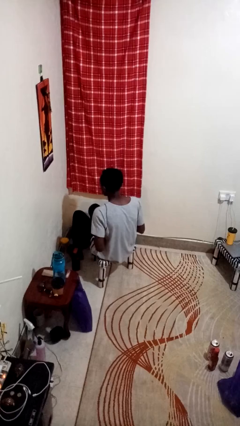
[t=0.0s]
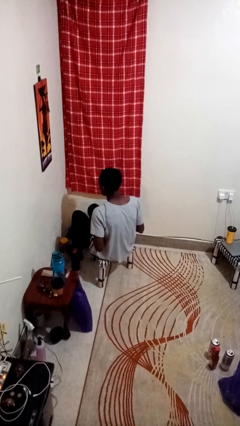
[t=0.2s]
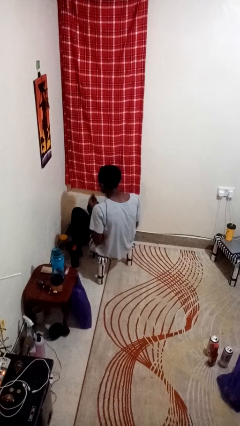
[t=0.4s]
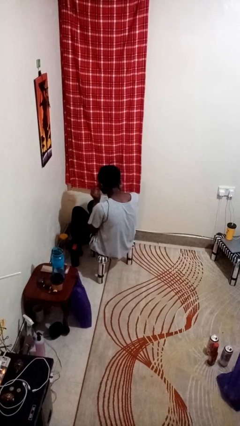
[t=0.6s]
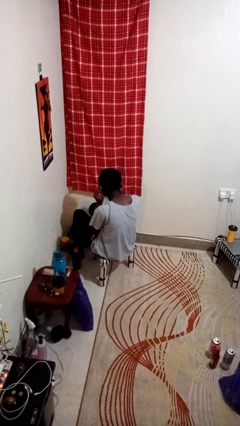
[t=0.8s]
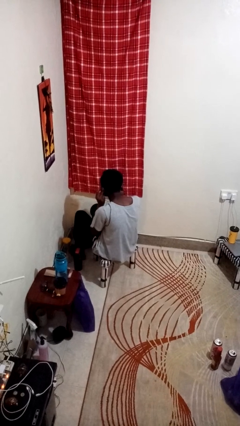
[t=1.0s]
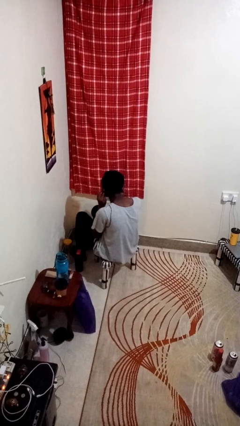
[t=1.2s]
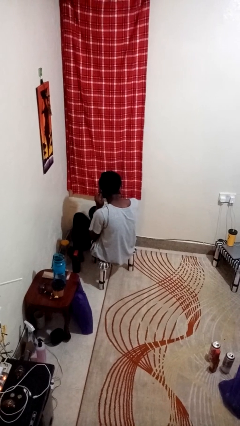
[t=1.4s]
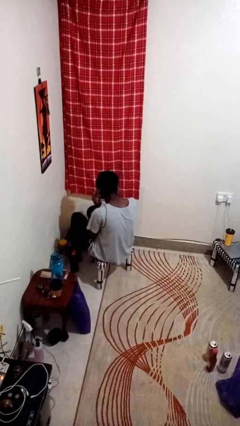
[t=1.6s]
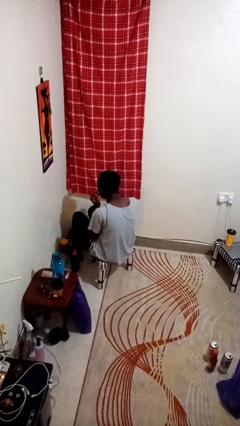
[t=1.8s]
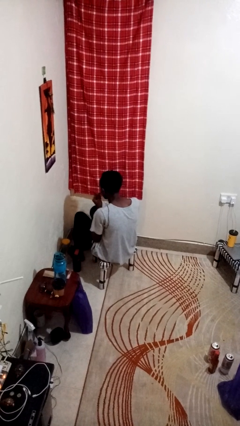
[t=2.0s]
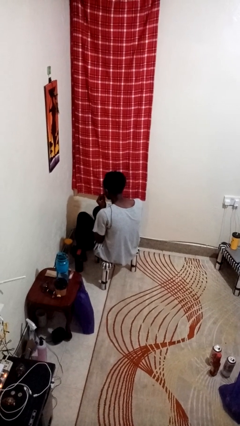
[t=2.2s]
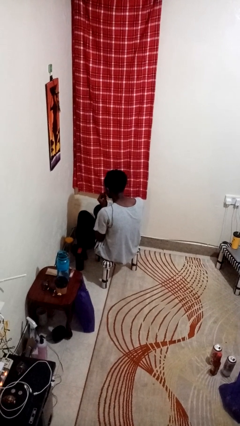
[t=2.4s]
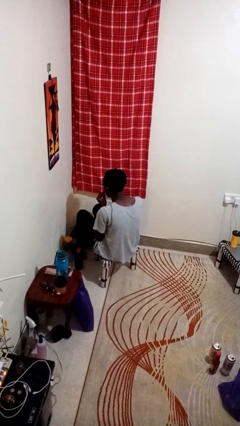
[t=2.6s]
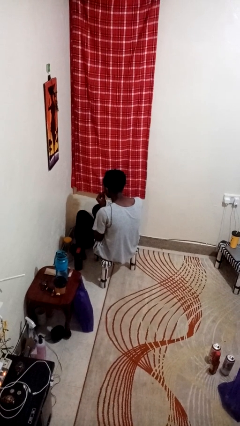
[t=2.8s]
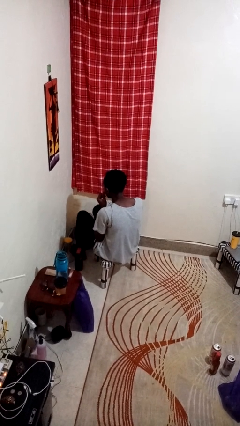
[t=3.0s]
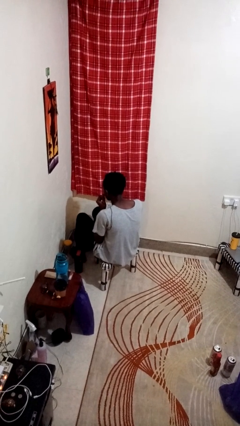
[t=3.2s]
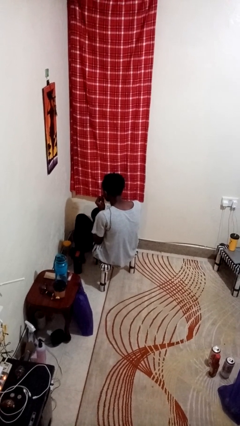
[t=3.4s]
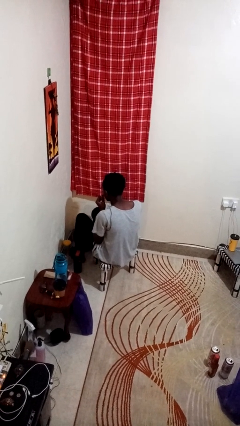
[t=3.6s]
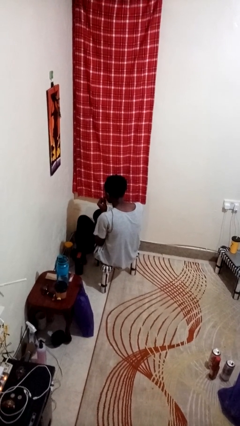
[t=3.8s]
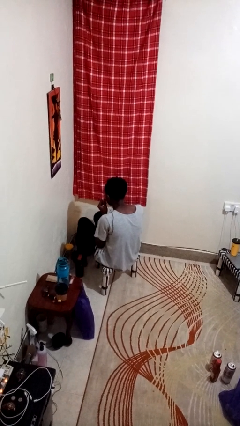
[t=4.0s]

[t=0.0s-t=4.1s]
person puts on headphones

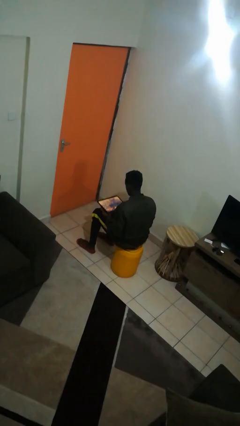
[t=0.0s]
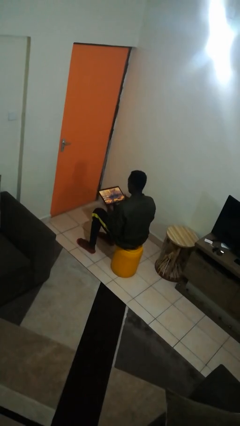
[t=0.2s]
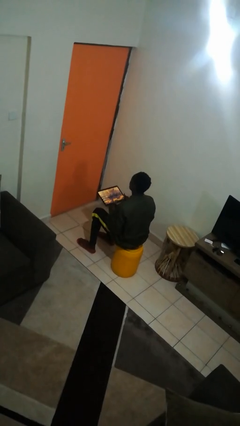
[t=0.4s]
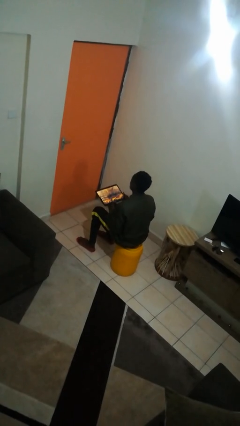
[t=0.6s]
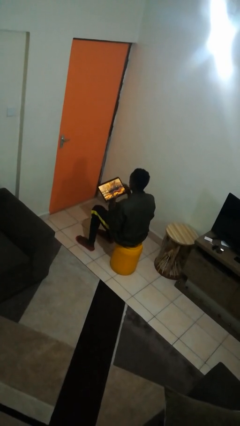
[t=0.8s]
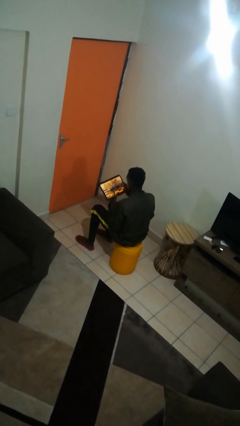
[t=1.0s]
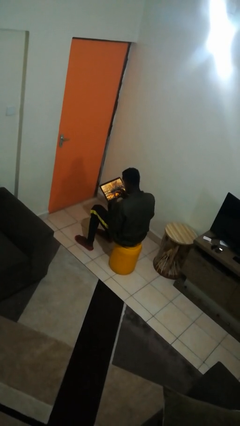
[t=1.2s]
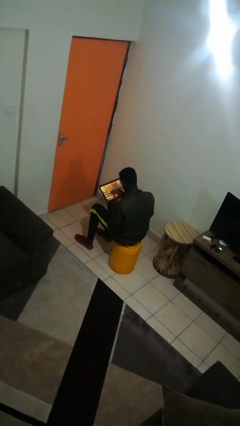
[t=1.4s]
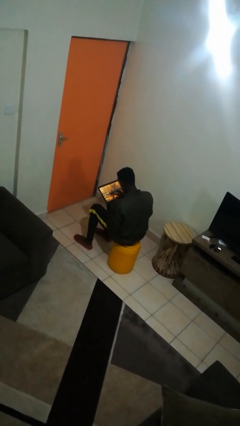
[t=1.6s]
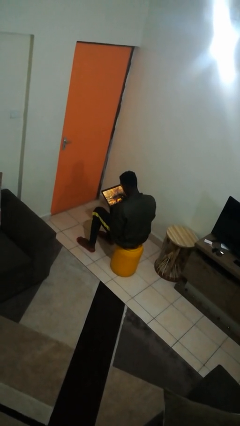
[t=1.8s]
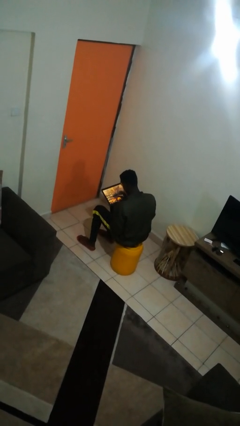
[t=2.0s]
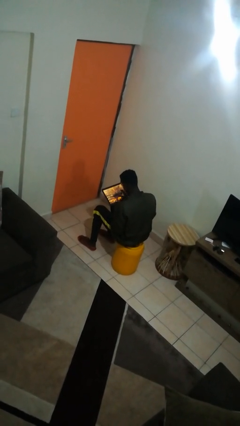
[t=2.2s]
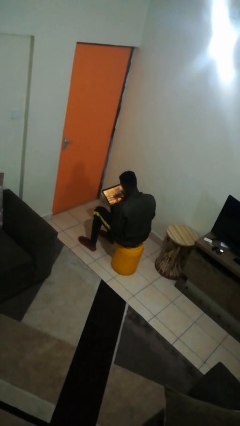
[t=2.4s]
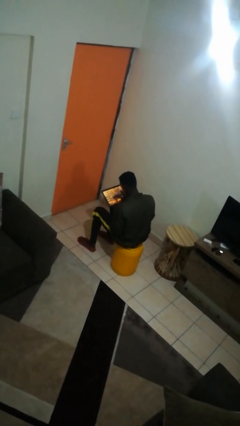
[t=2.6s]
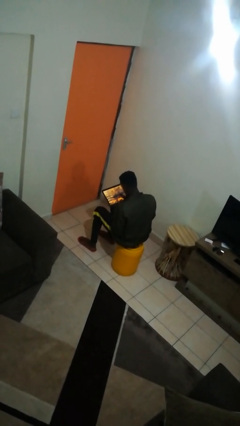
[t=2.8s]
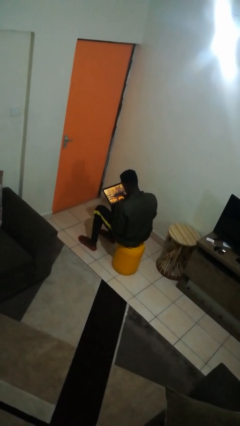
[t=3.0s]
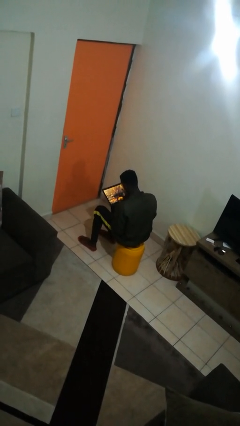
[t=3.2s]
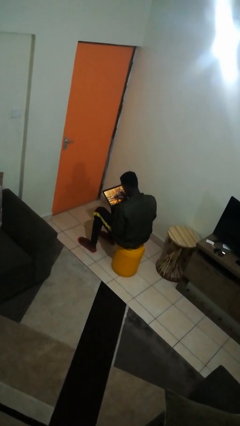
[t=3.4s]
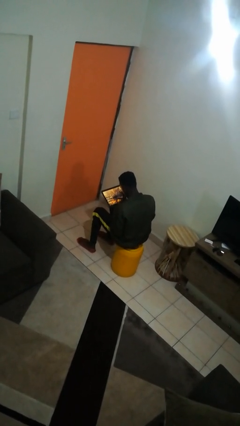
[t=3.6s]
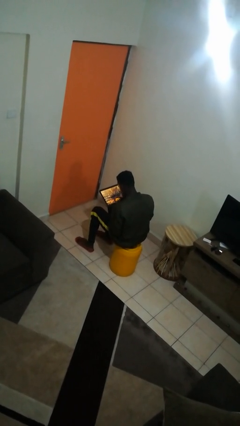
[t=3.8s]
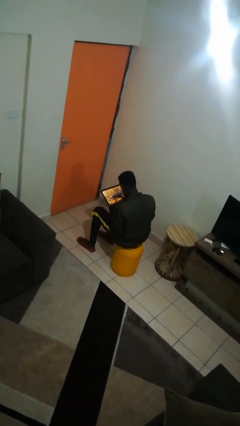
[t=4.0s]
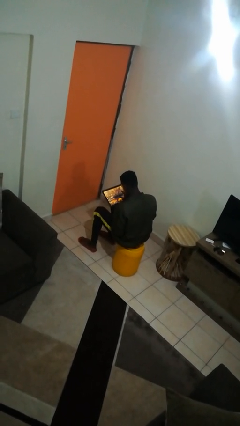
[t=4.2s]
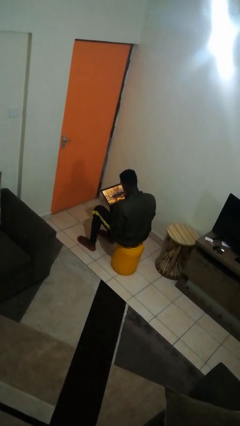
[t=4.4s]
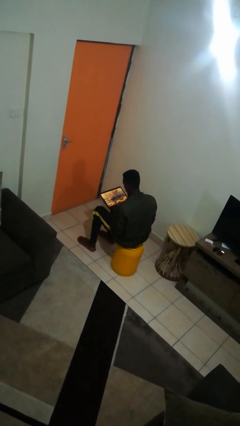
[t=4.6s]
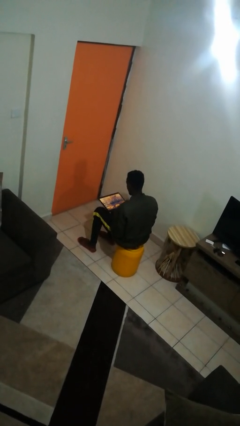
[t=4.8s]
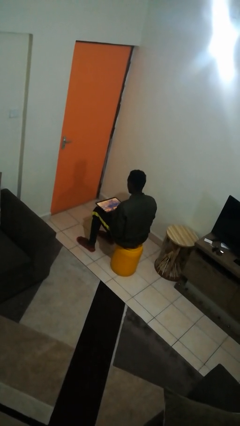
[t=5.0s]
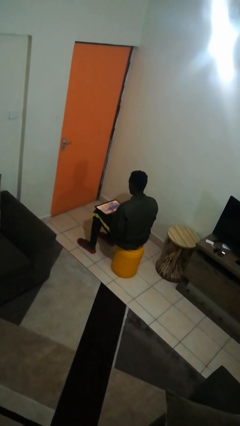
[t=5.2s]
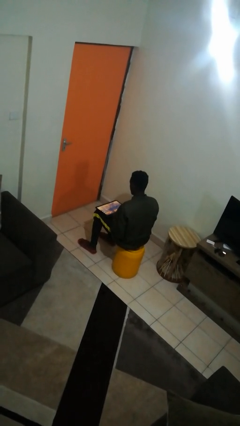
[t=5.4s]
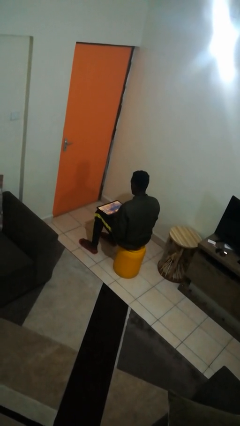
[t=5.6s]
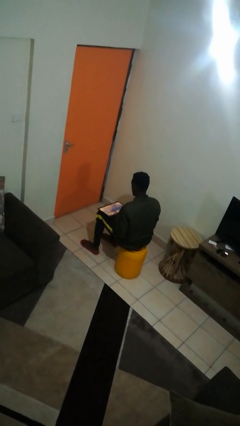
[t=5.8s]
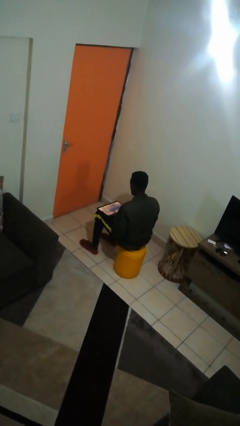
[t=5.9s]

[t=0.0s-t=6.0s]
person interacts with tablet

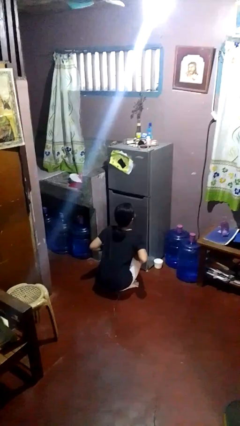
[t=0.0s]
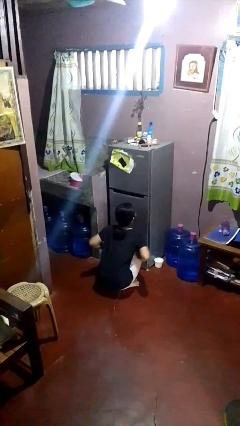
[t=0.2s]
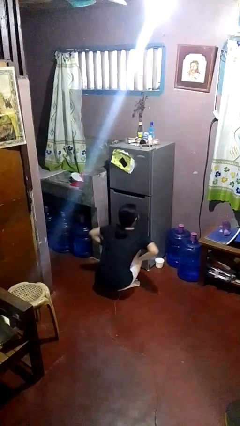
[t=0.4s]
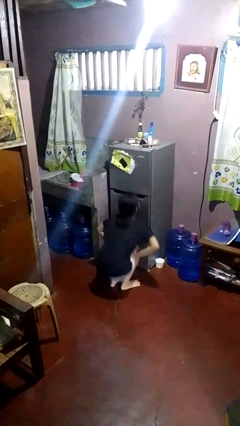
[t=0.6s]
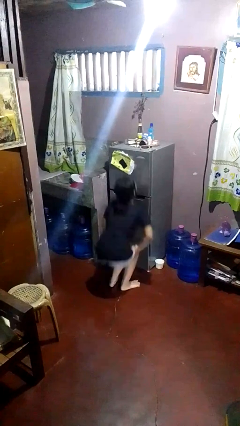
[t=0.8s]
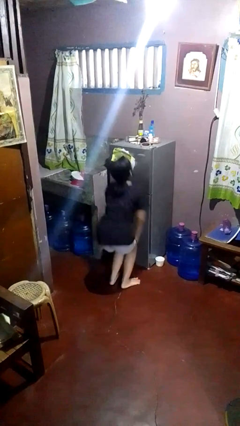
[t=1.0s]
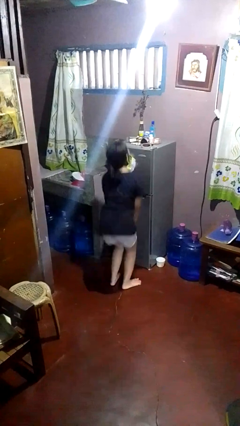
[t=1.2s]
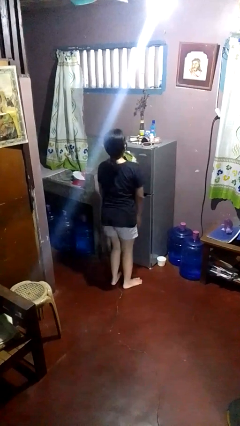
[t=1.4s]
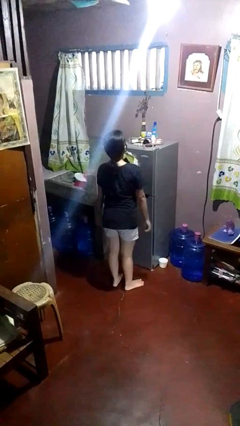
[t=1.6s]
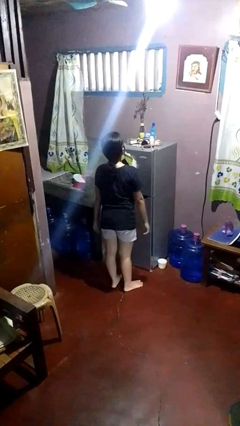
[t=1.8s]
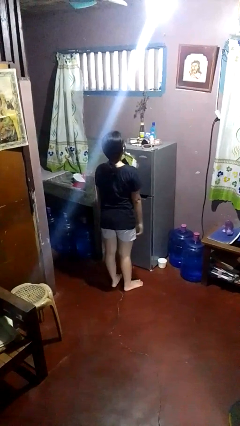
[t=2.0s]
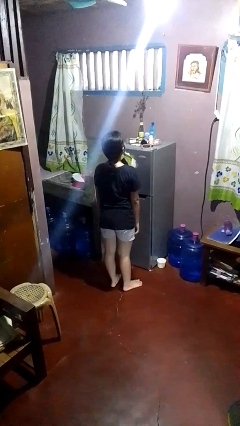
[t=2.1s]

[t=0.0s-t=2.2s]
person stands up

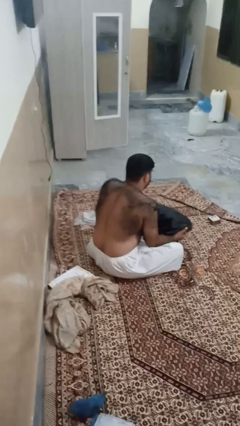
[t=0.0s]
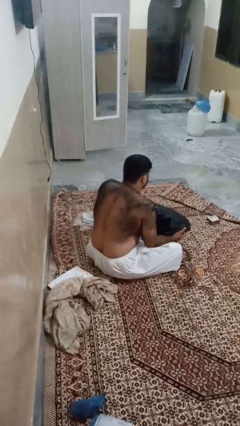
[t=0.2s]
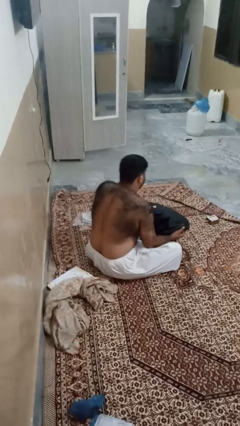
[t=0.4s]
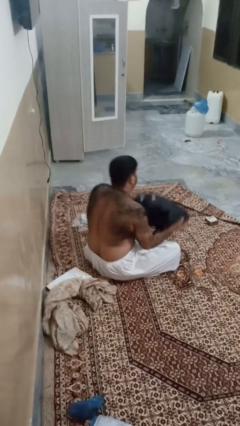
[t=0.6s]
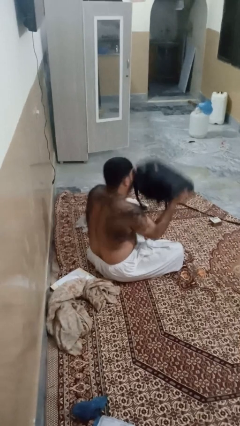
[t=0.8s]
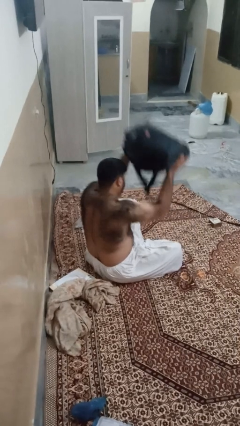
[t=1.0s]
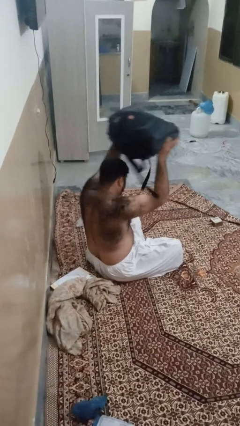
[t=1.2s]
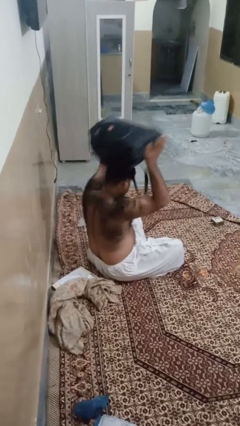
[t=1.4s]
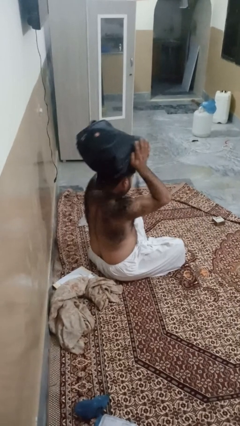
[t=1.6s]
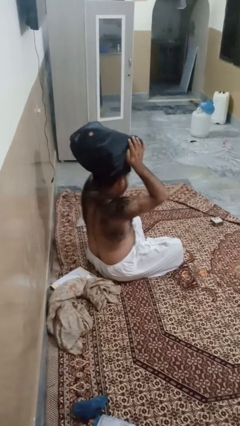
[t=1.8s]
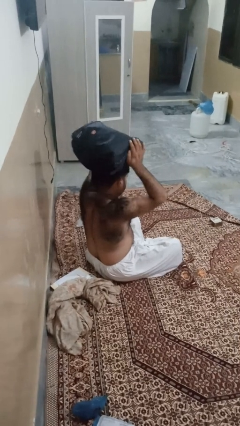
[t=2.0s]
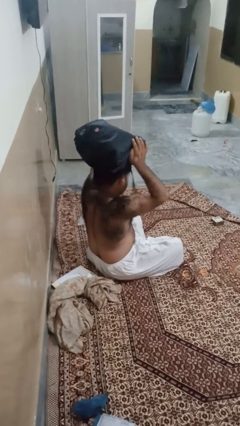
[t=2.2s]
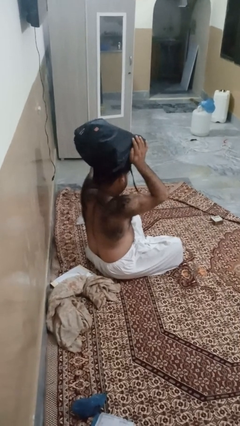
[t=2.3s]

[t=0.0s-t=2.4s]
person holds object above head

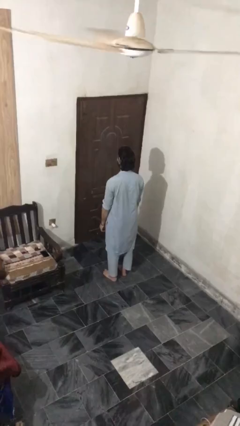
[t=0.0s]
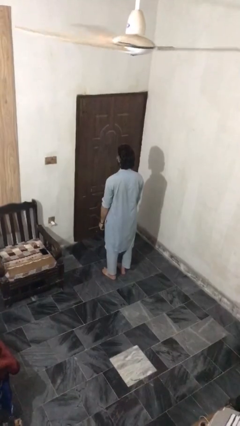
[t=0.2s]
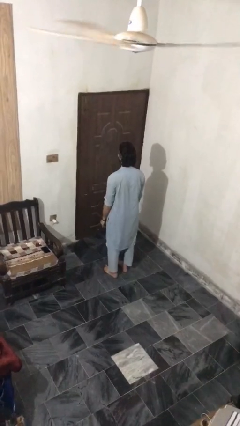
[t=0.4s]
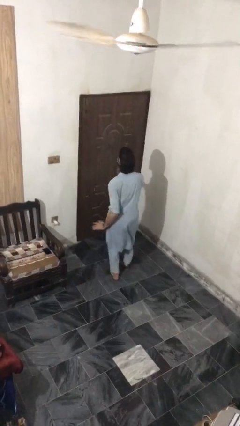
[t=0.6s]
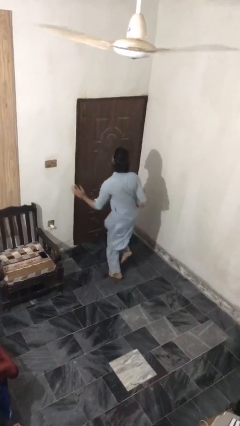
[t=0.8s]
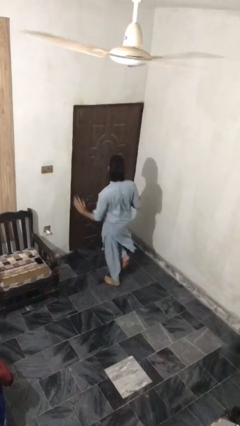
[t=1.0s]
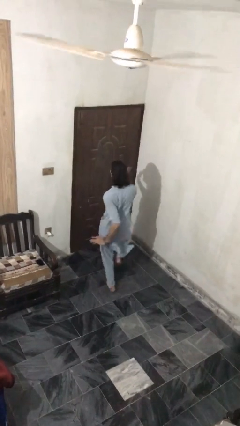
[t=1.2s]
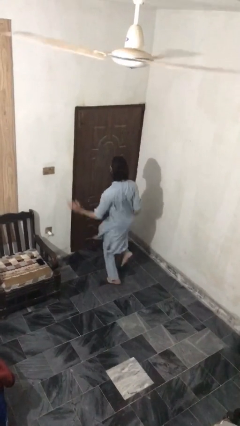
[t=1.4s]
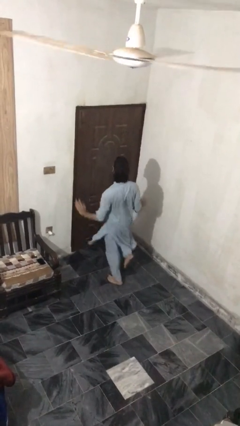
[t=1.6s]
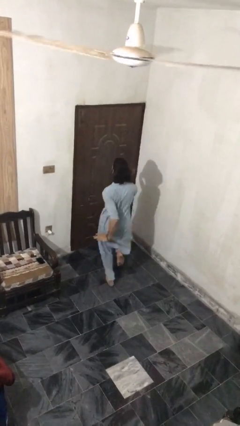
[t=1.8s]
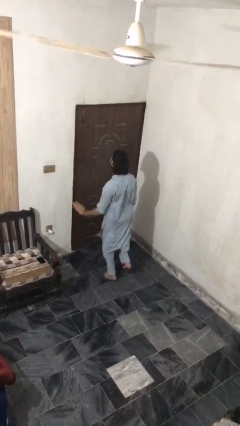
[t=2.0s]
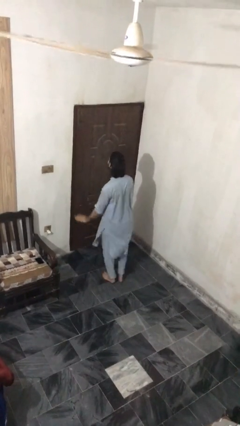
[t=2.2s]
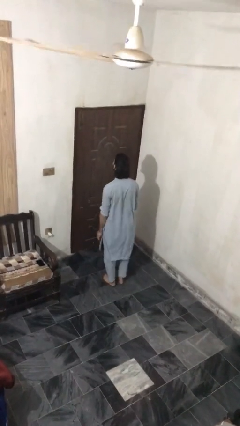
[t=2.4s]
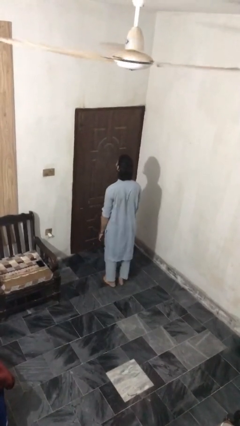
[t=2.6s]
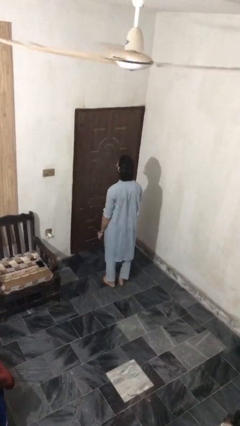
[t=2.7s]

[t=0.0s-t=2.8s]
person dances in place

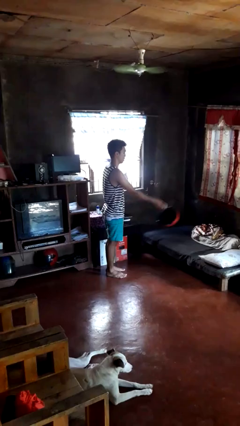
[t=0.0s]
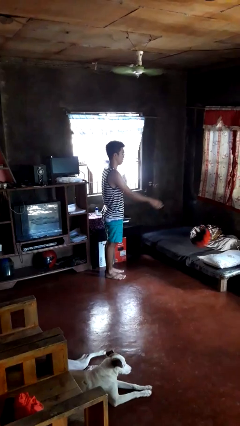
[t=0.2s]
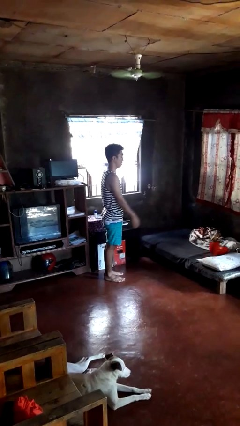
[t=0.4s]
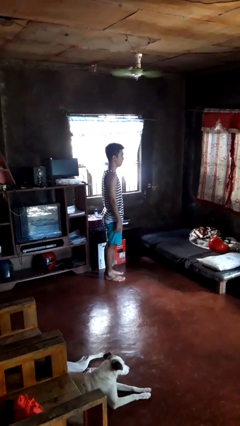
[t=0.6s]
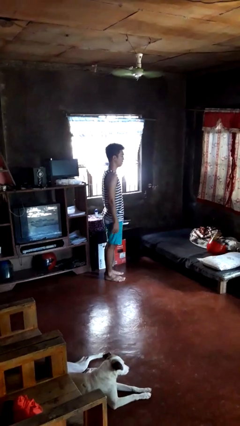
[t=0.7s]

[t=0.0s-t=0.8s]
person throws object on bed
